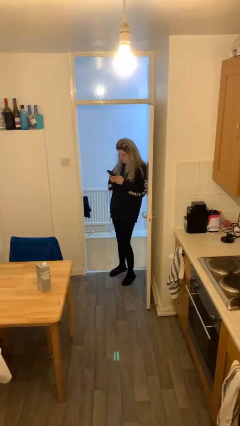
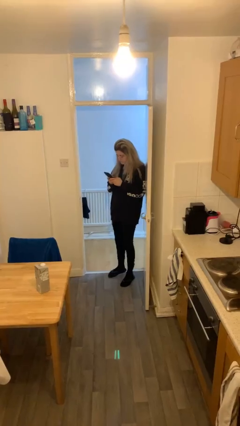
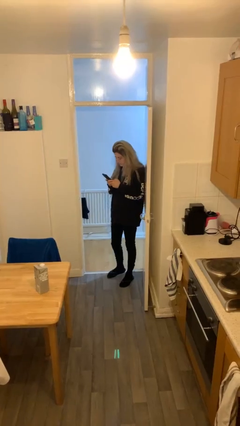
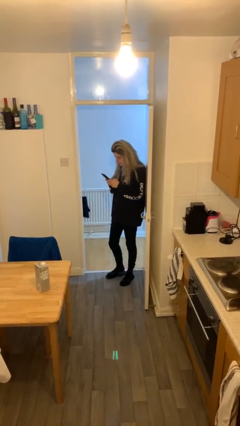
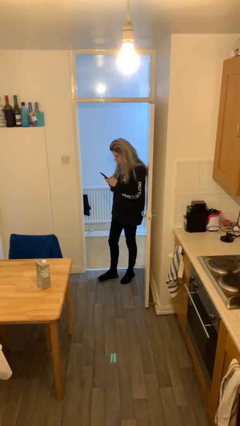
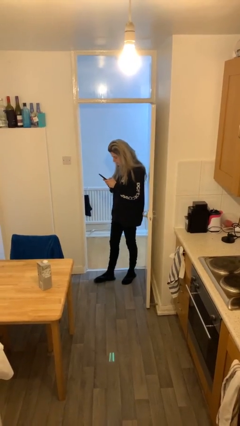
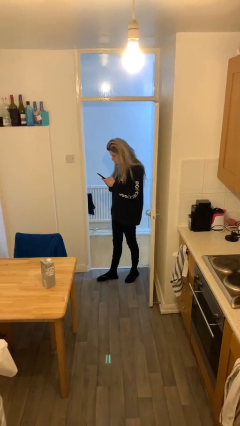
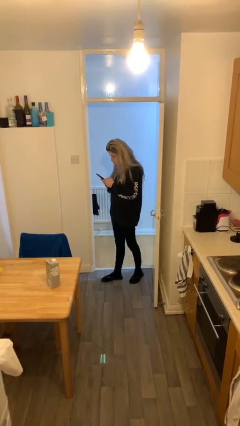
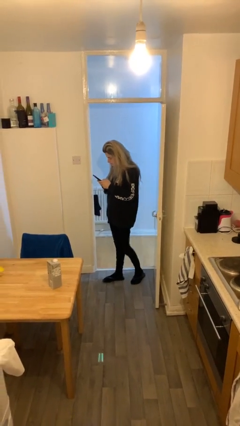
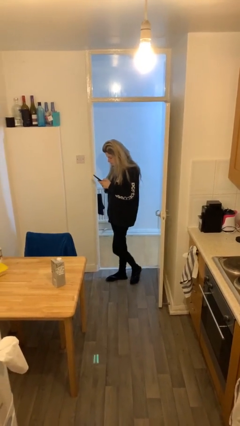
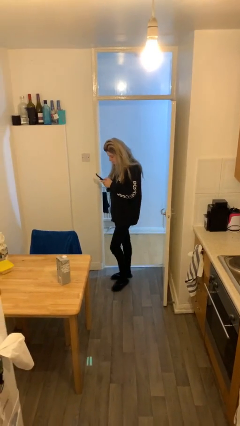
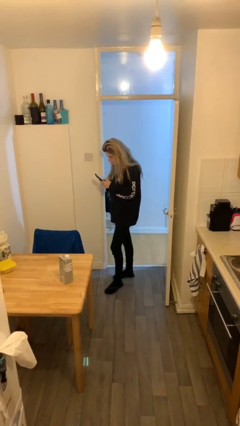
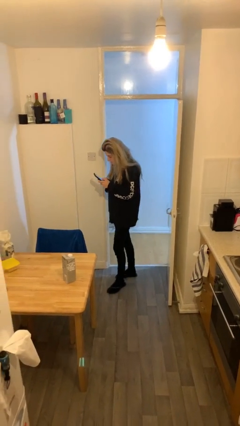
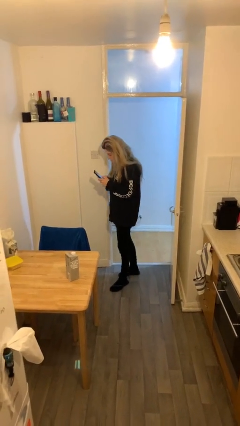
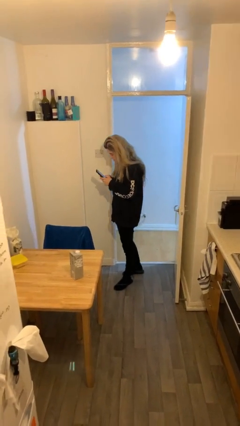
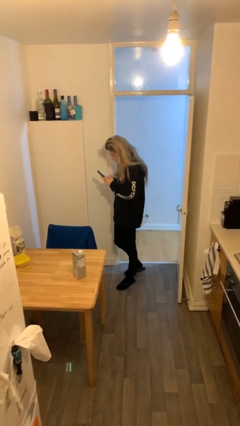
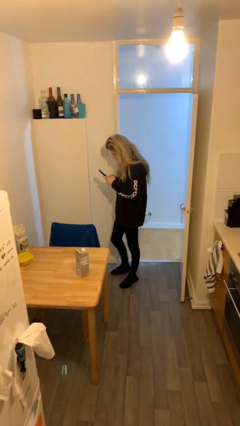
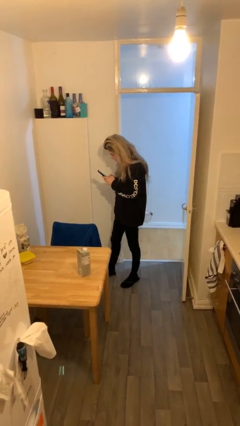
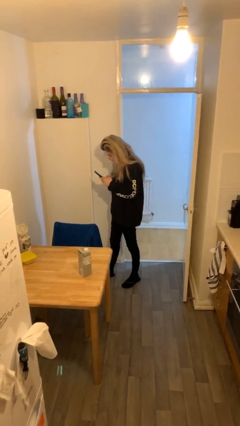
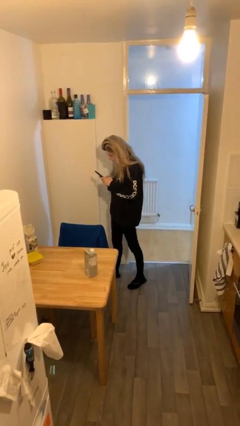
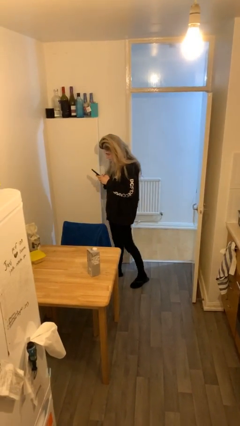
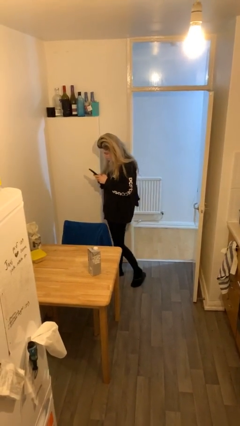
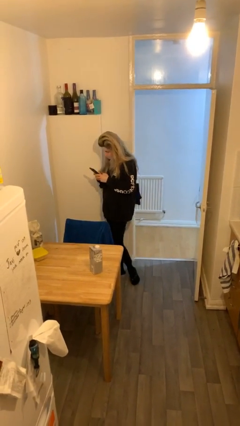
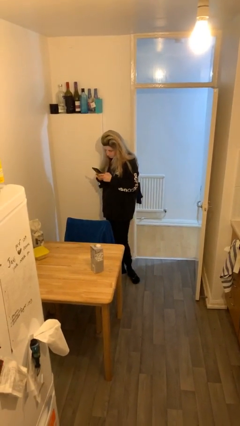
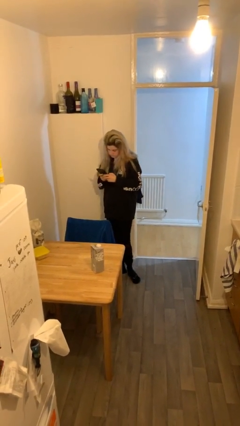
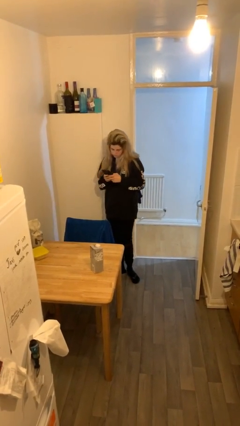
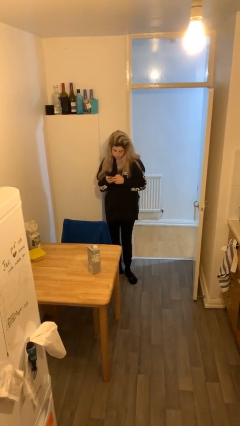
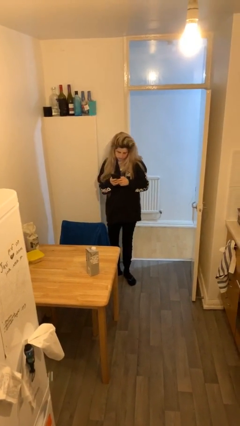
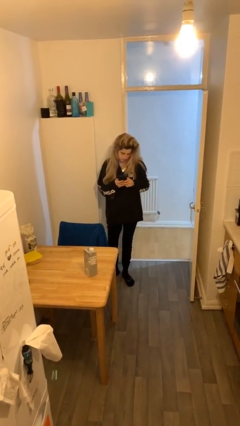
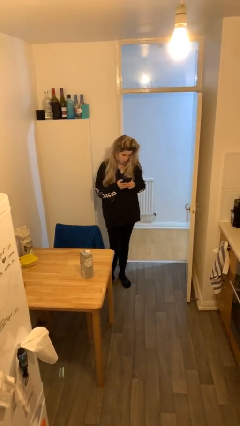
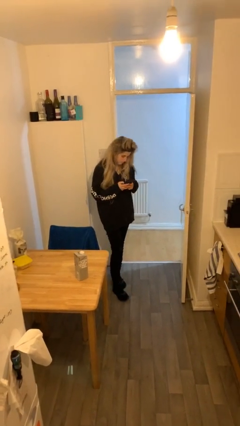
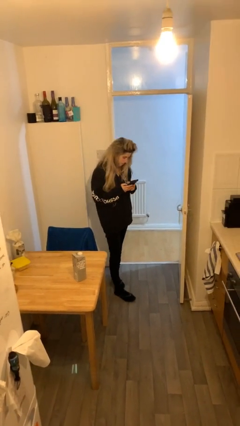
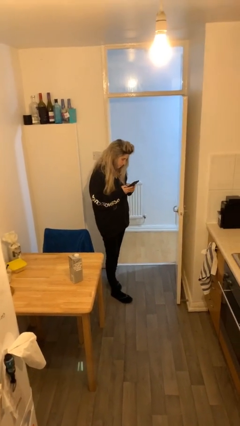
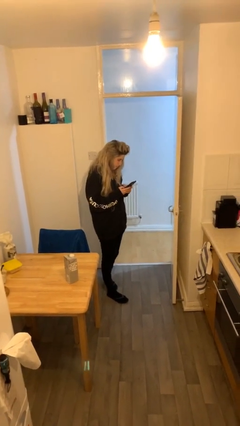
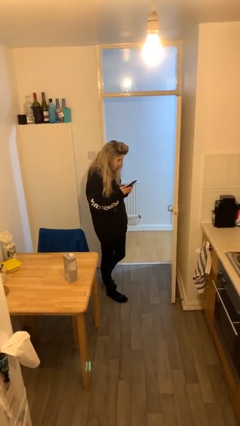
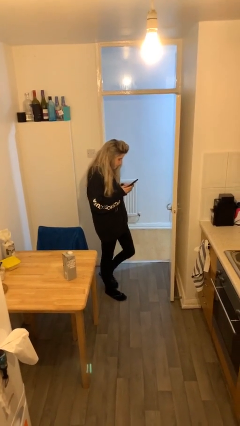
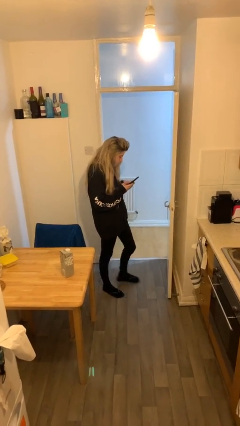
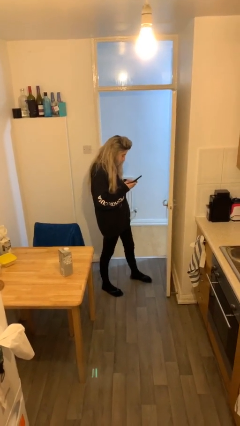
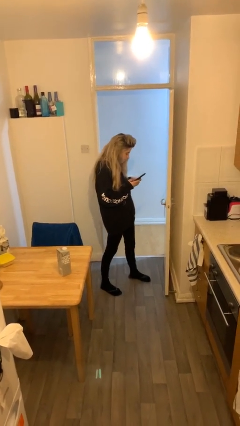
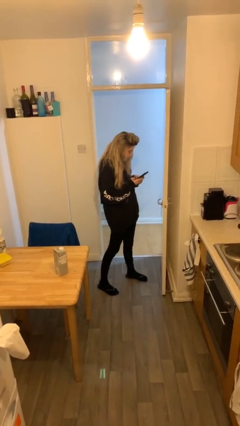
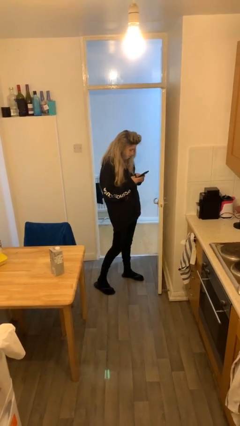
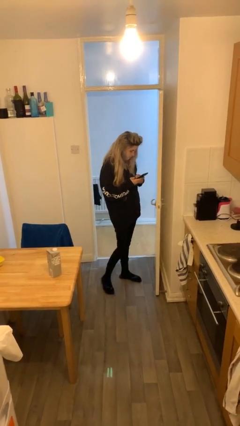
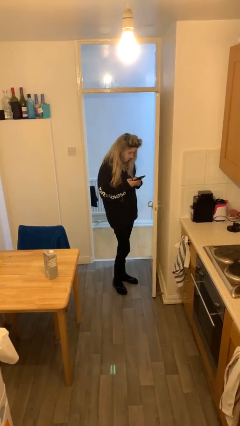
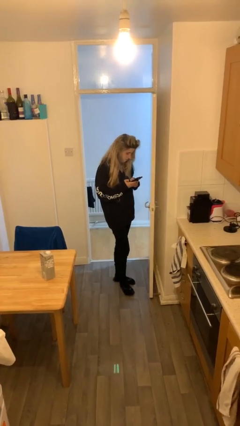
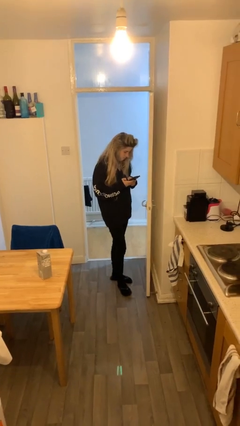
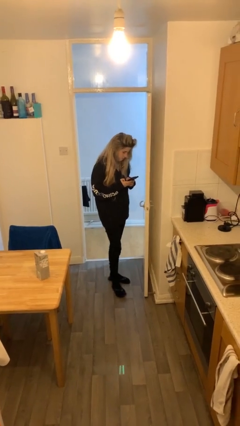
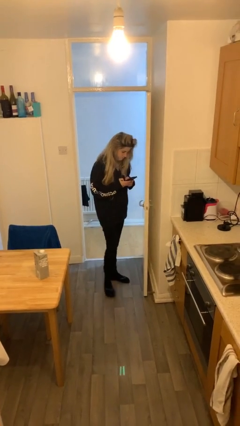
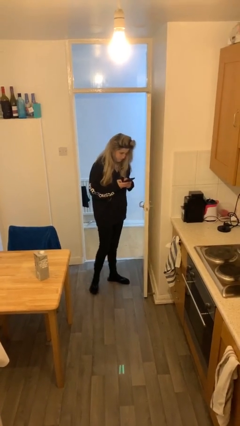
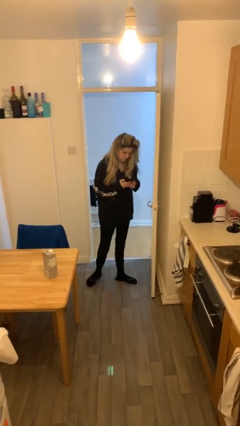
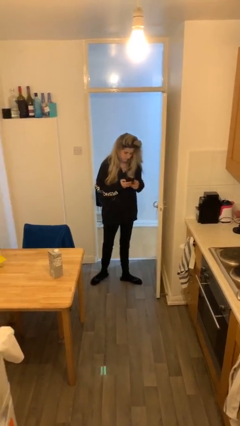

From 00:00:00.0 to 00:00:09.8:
person texts on phone

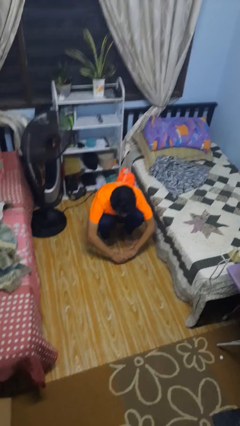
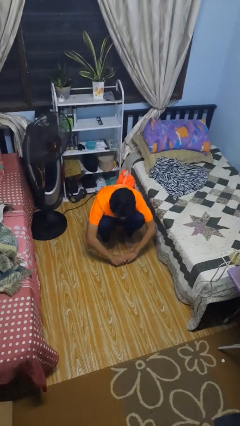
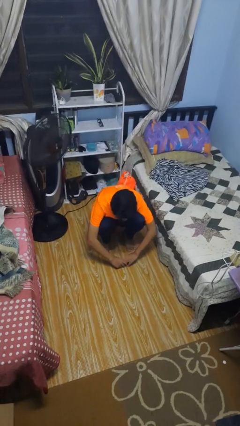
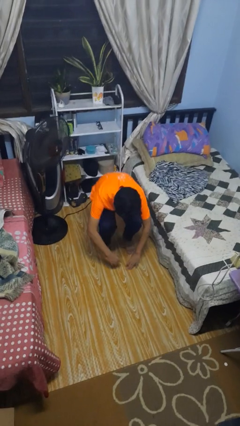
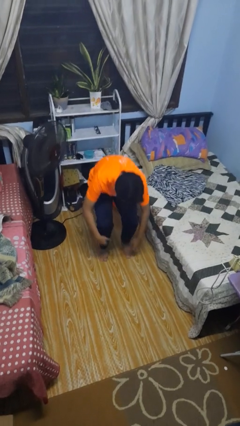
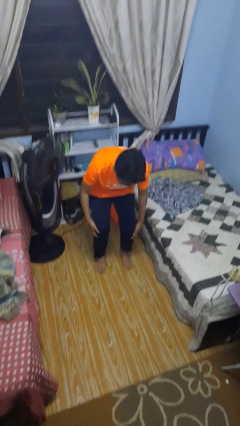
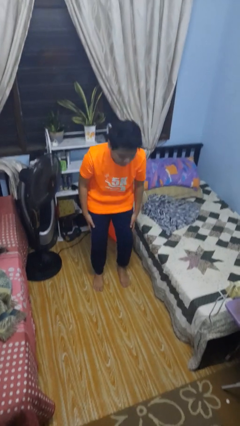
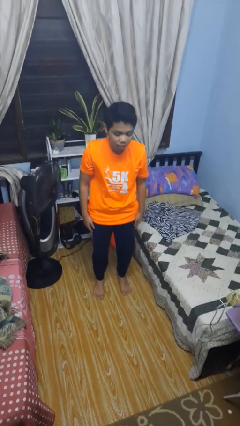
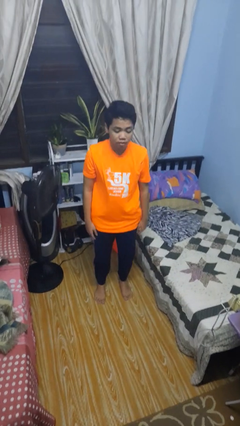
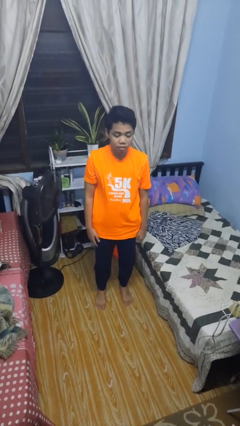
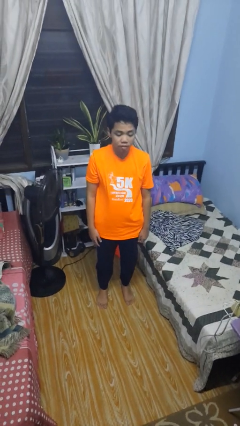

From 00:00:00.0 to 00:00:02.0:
person stands up

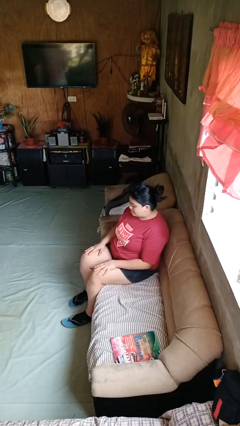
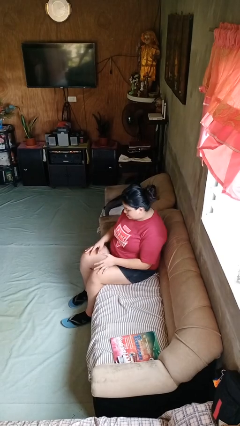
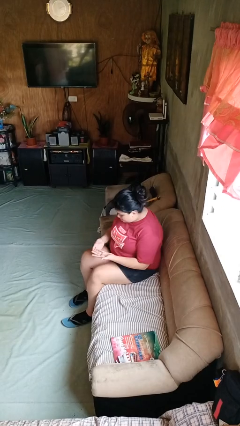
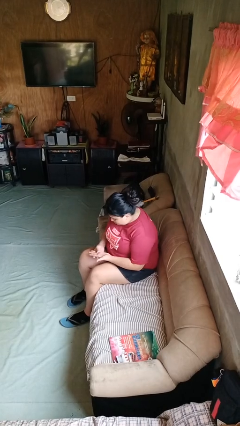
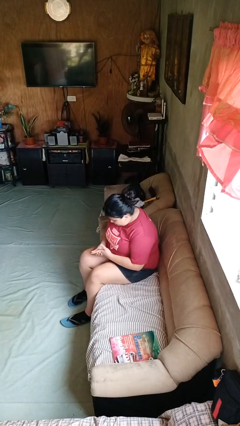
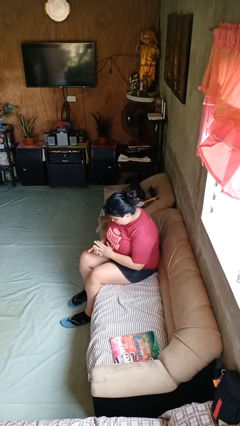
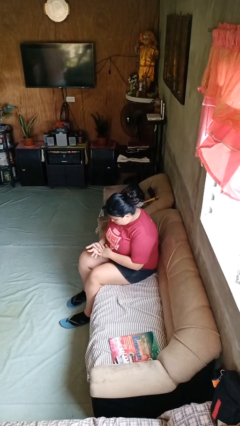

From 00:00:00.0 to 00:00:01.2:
person looks at hands in lap

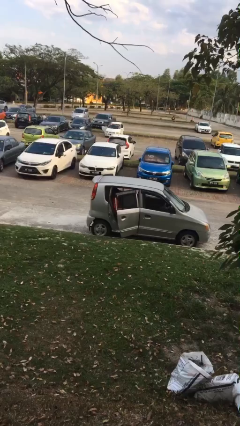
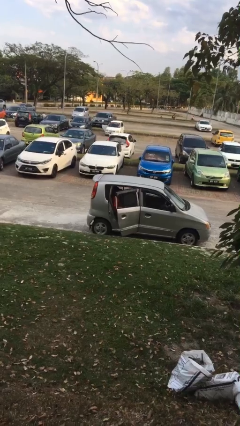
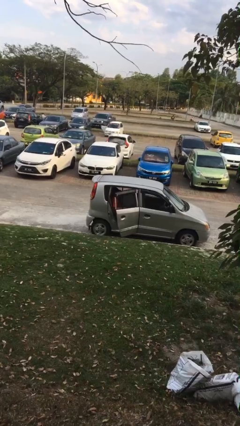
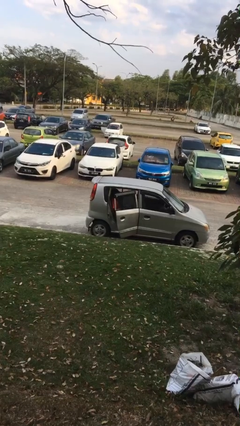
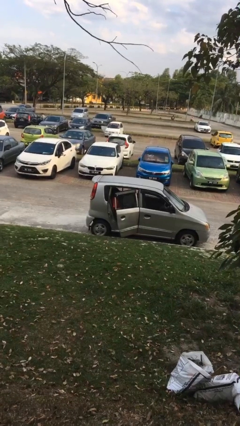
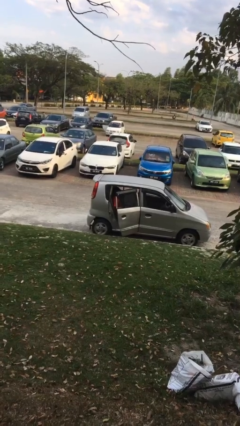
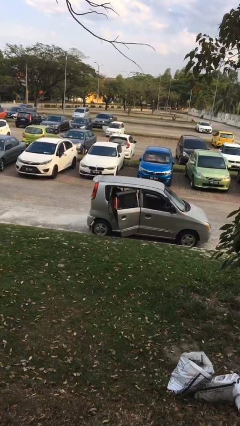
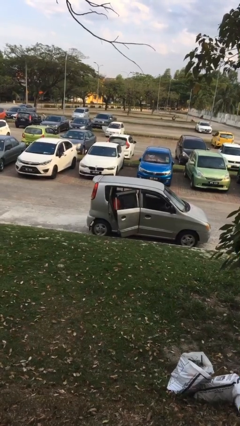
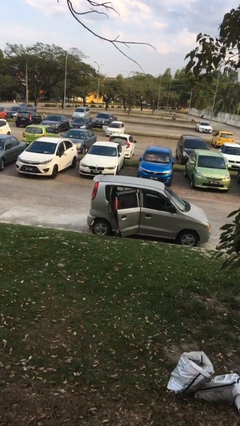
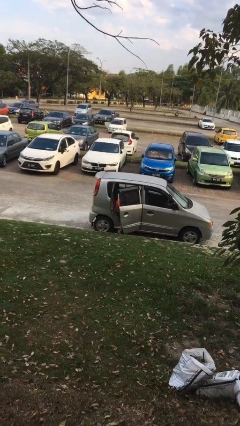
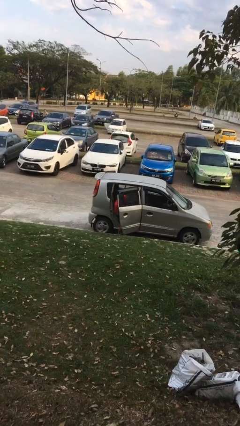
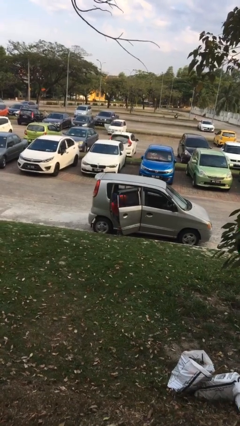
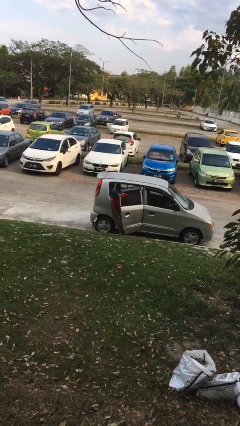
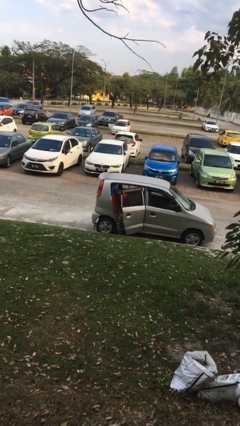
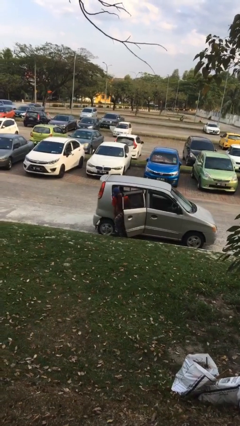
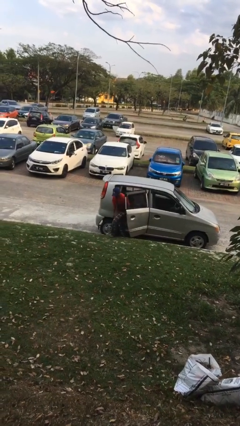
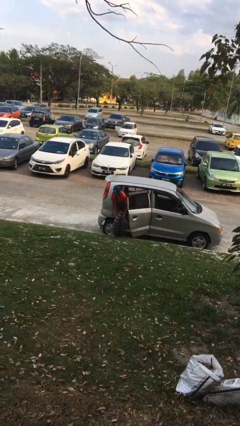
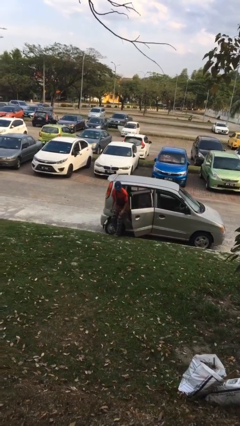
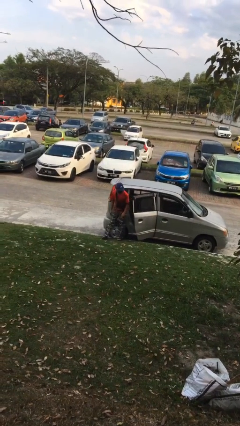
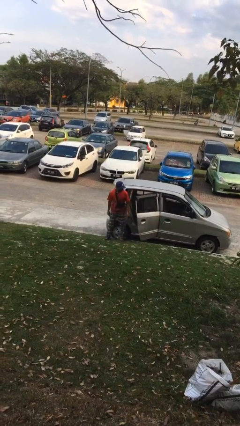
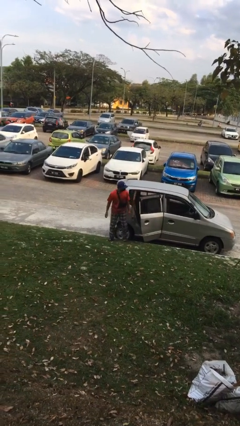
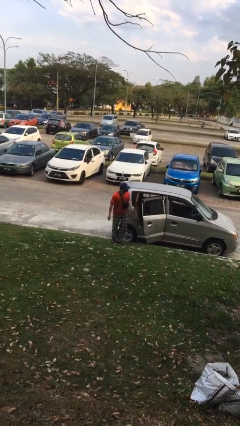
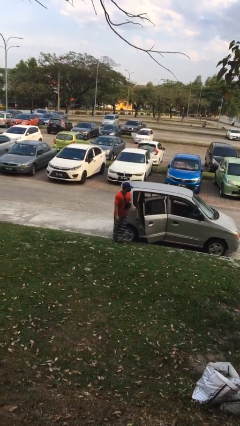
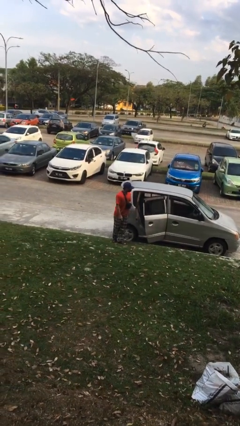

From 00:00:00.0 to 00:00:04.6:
person exits car
